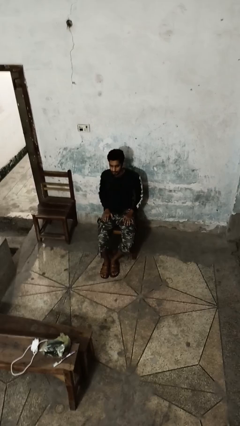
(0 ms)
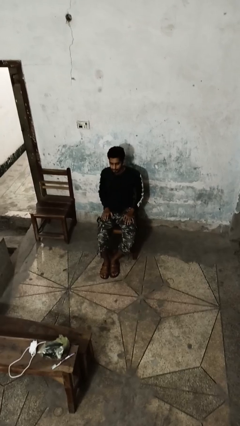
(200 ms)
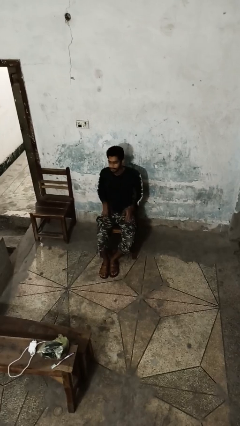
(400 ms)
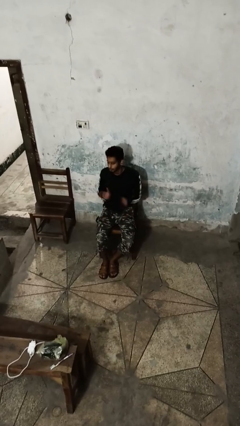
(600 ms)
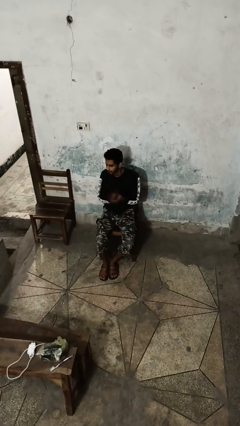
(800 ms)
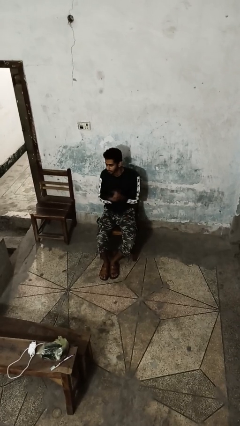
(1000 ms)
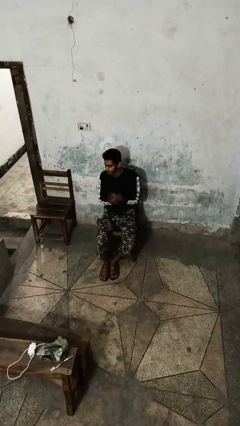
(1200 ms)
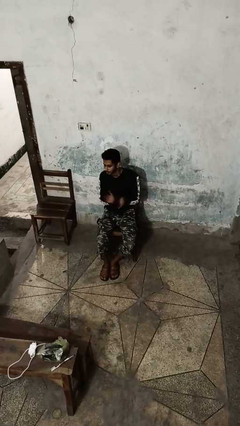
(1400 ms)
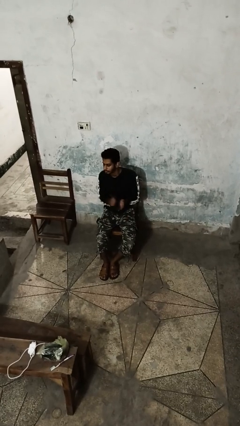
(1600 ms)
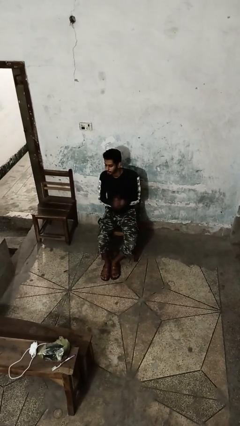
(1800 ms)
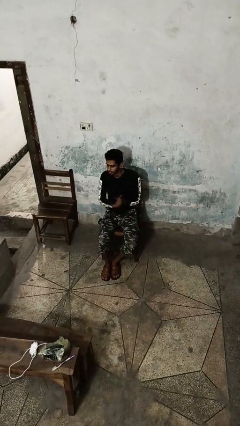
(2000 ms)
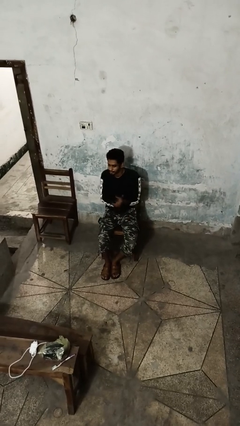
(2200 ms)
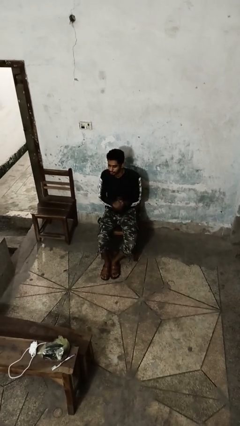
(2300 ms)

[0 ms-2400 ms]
person claps hands

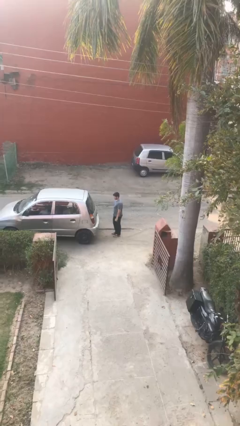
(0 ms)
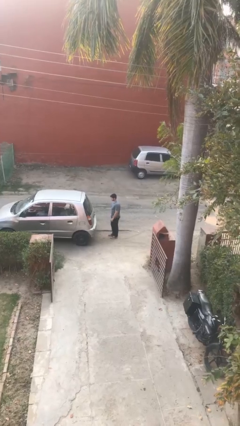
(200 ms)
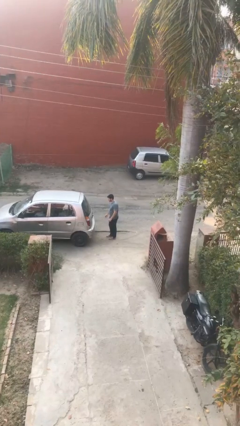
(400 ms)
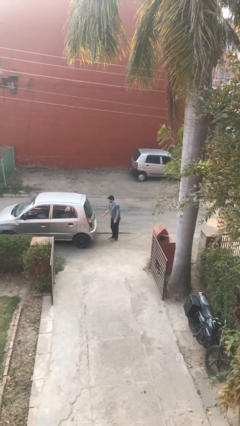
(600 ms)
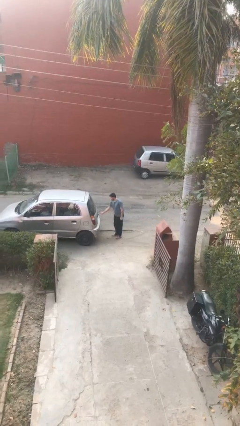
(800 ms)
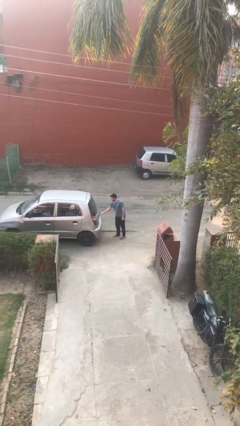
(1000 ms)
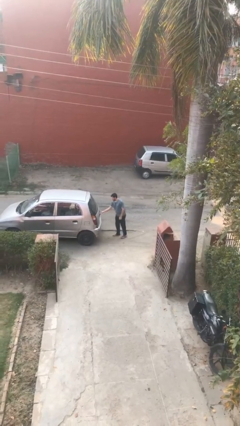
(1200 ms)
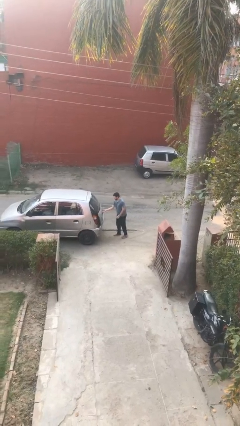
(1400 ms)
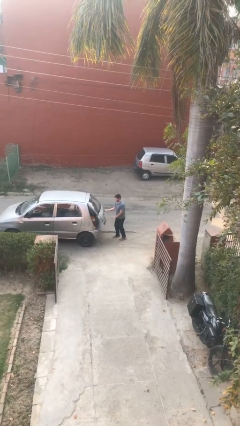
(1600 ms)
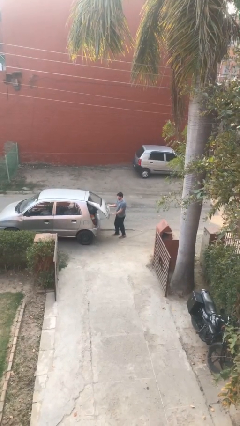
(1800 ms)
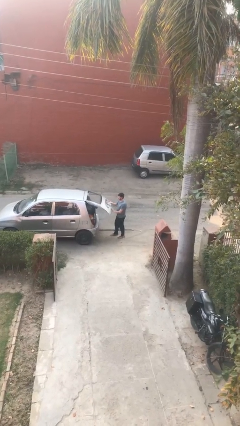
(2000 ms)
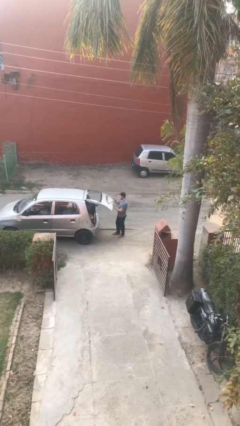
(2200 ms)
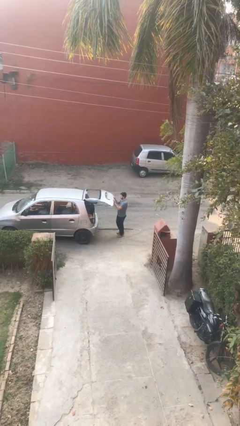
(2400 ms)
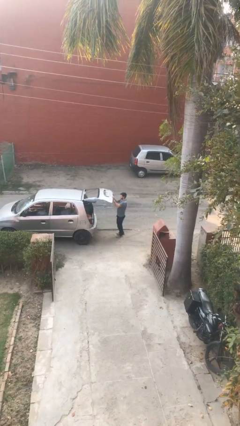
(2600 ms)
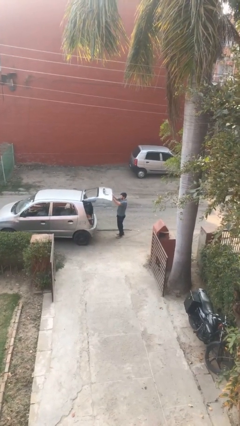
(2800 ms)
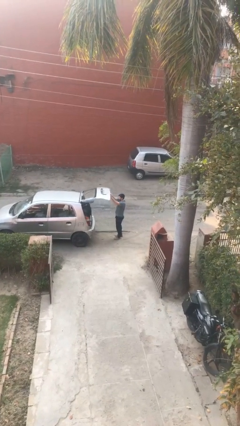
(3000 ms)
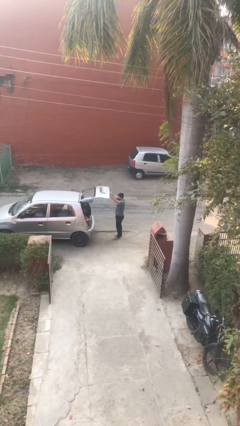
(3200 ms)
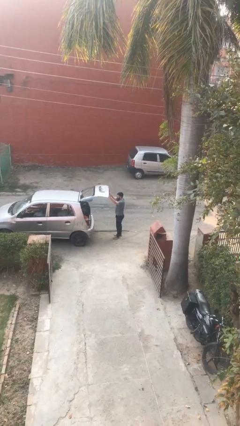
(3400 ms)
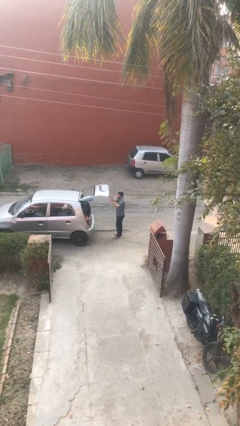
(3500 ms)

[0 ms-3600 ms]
person opens car trunk

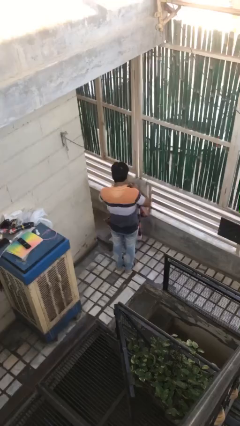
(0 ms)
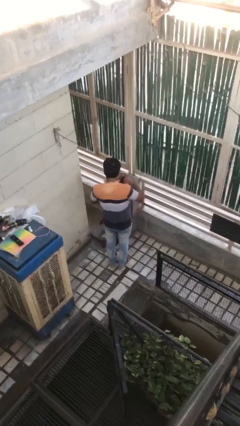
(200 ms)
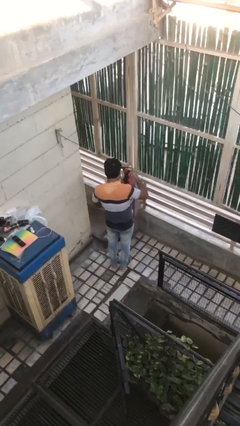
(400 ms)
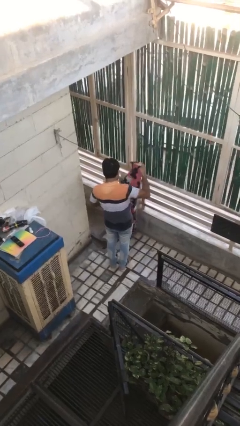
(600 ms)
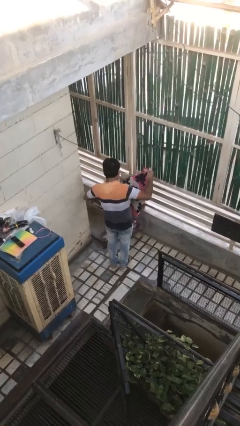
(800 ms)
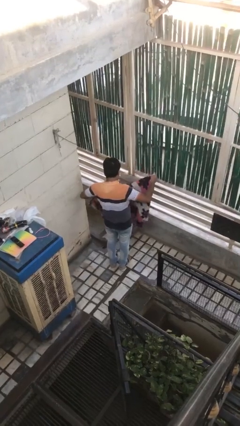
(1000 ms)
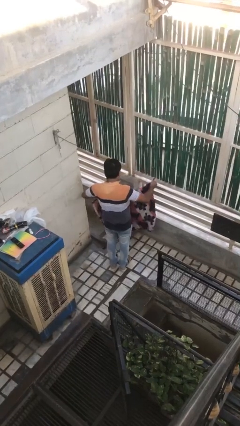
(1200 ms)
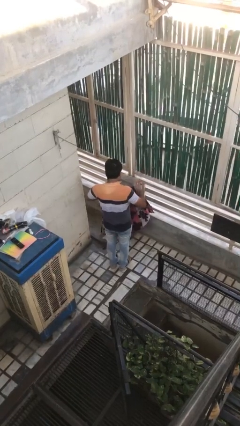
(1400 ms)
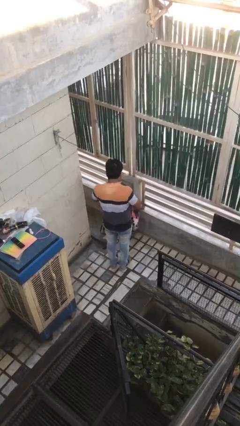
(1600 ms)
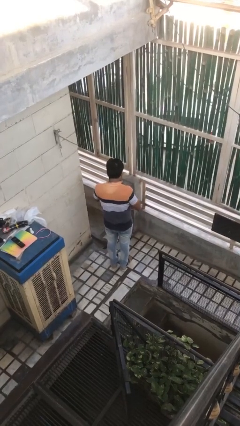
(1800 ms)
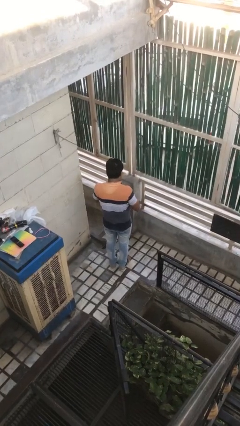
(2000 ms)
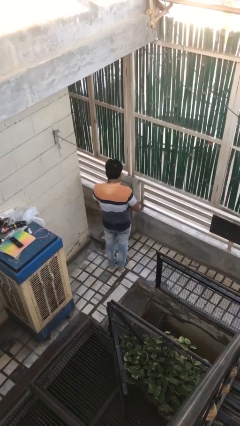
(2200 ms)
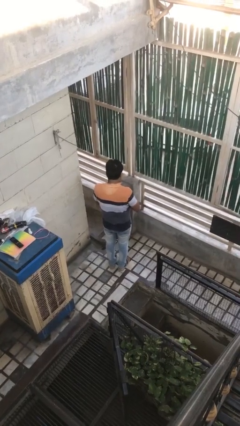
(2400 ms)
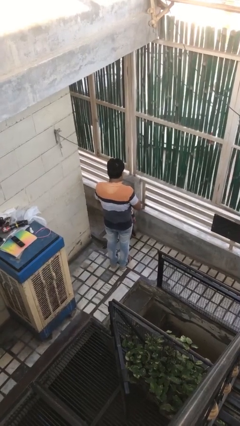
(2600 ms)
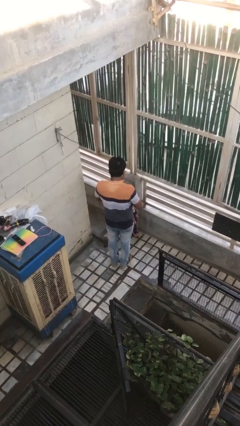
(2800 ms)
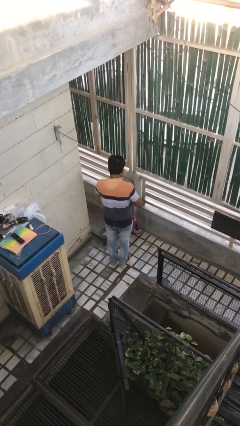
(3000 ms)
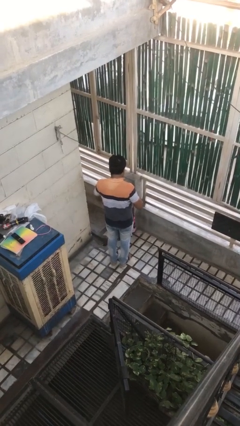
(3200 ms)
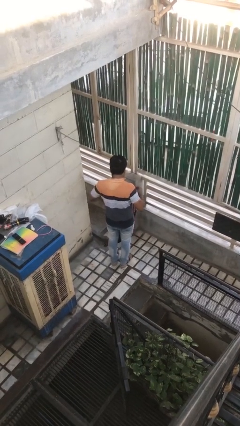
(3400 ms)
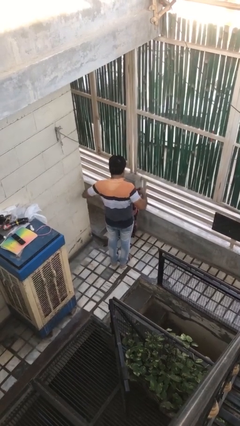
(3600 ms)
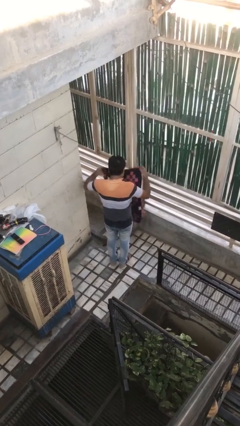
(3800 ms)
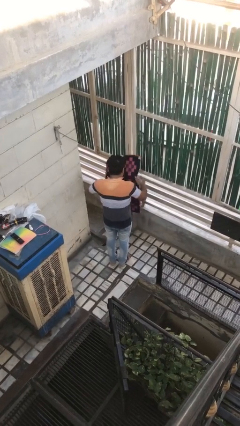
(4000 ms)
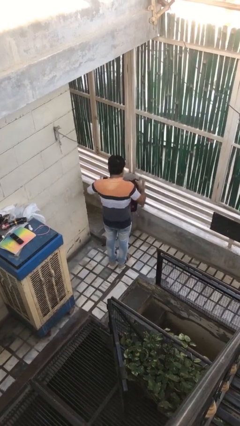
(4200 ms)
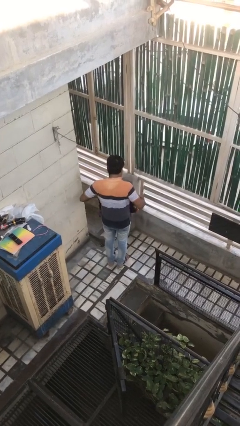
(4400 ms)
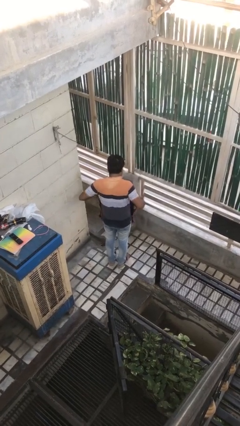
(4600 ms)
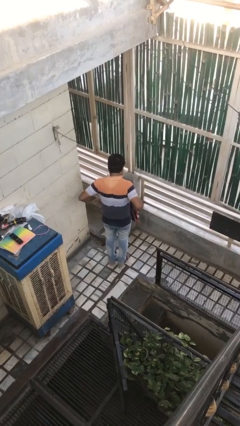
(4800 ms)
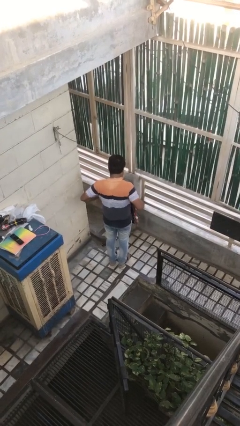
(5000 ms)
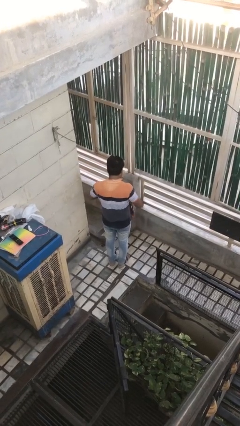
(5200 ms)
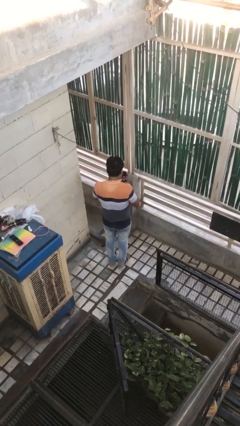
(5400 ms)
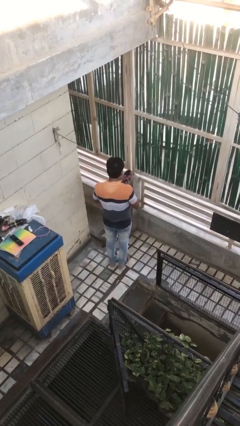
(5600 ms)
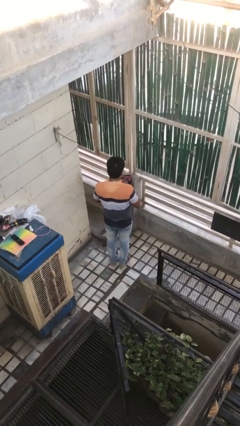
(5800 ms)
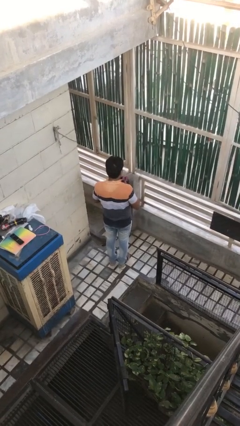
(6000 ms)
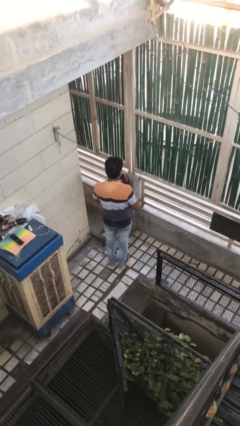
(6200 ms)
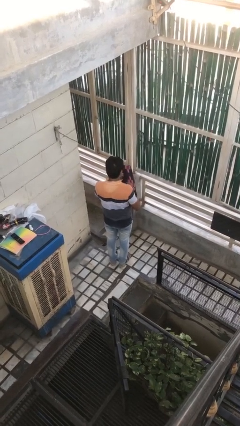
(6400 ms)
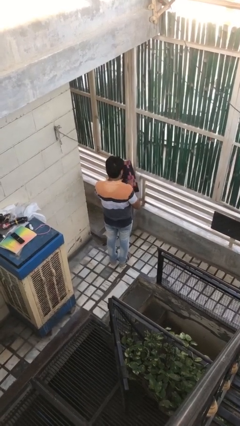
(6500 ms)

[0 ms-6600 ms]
person folds blanket

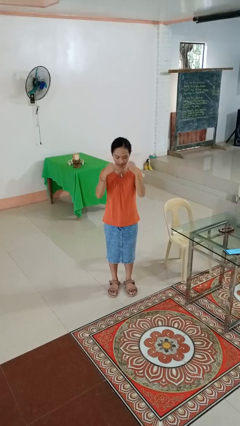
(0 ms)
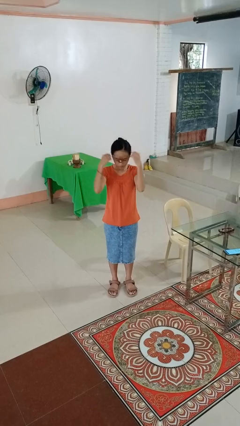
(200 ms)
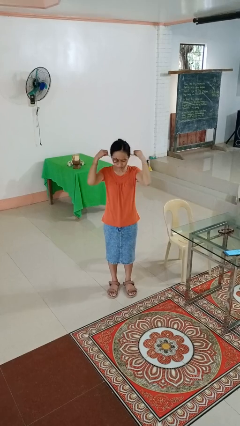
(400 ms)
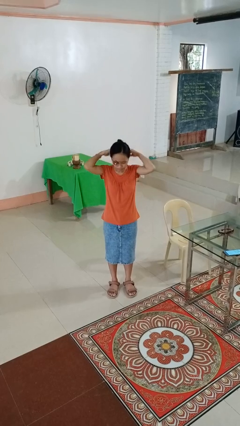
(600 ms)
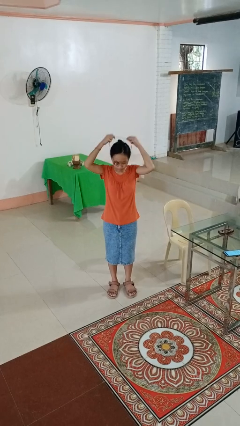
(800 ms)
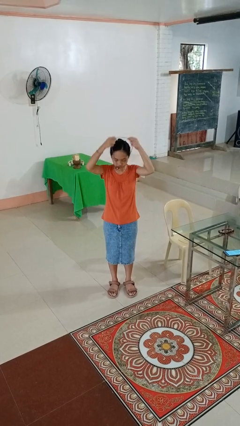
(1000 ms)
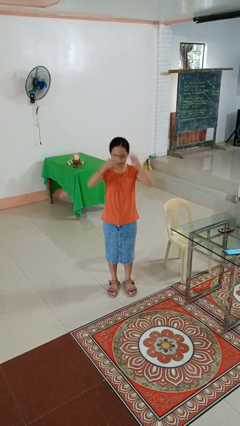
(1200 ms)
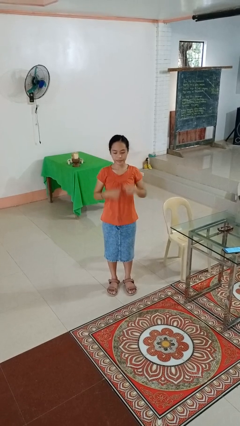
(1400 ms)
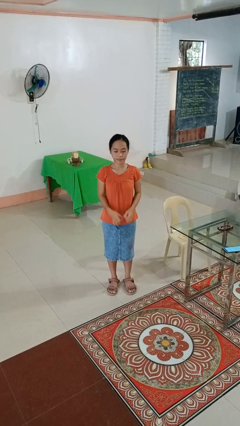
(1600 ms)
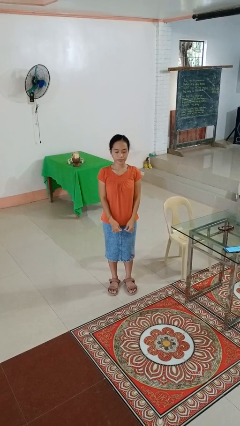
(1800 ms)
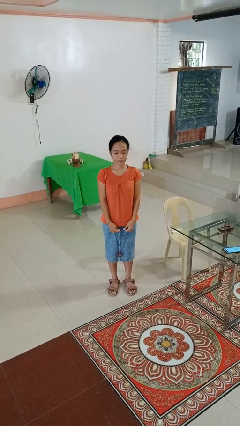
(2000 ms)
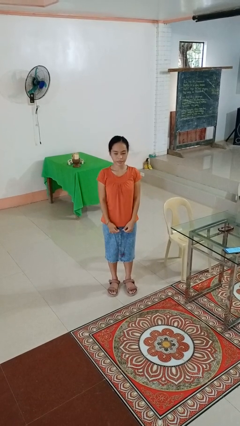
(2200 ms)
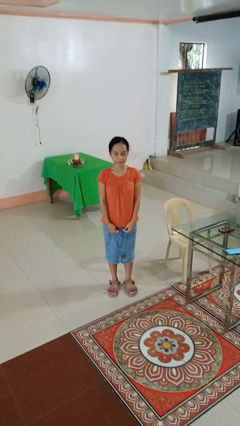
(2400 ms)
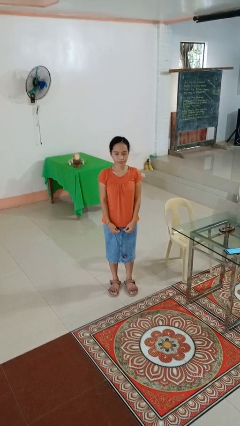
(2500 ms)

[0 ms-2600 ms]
person takes off necklace

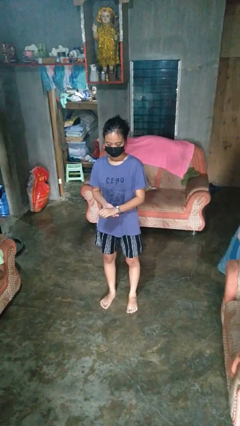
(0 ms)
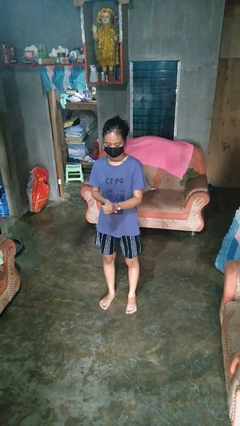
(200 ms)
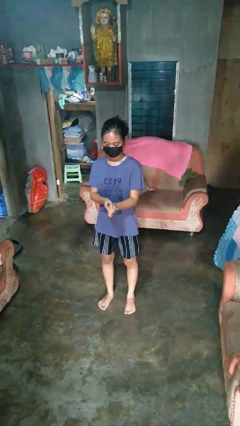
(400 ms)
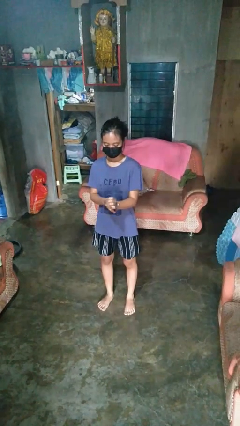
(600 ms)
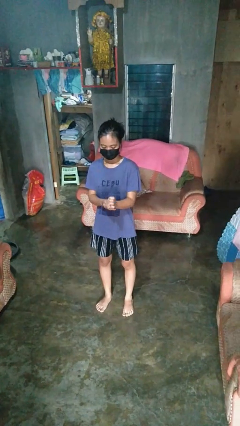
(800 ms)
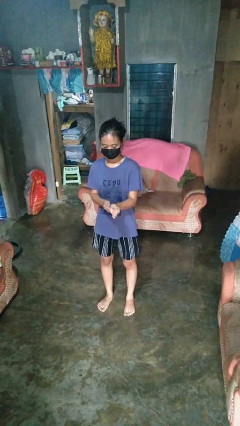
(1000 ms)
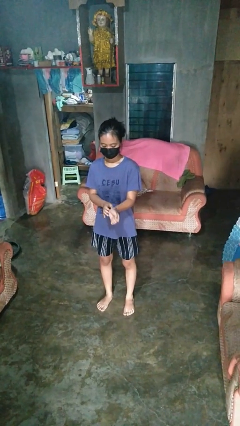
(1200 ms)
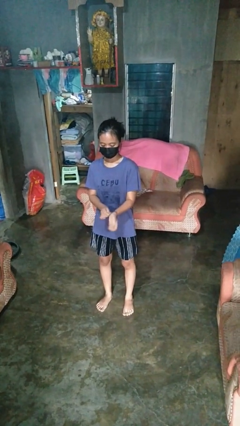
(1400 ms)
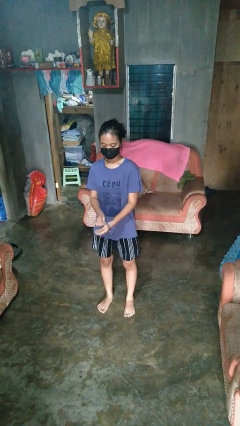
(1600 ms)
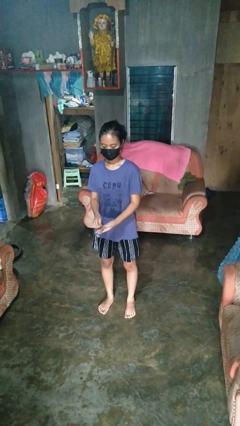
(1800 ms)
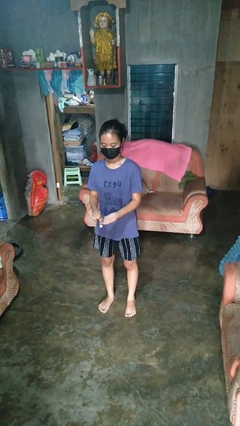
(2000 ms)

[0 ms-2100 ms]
person takes off wristwatch

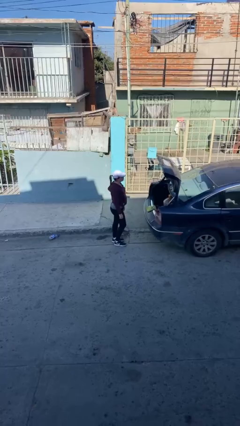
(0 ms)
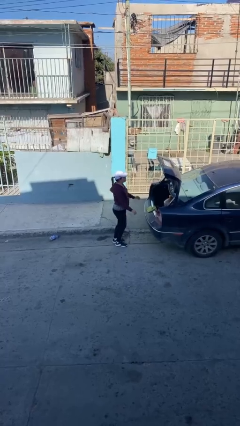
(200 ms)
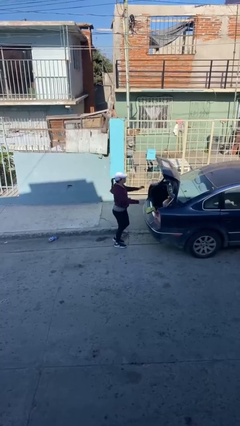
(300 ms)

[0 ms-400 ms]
person closes car trunk
